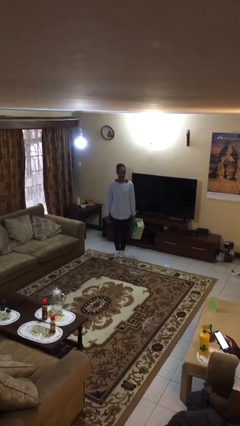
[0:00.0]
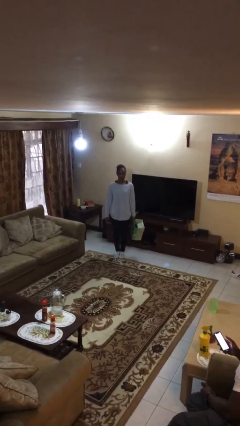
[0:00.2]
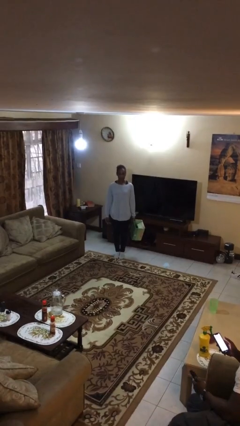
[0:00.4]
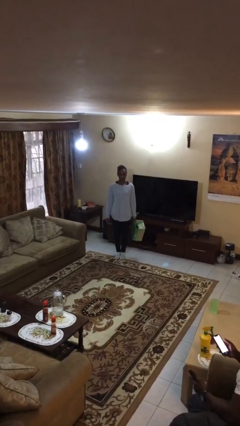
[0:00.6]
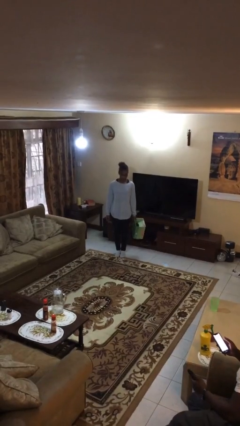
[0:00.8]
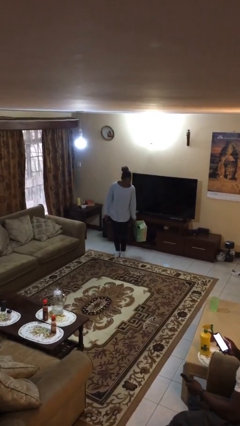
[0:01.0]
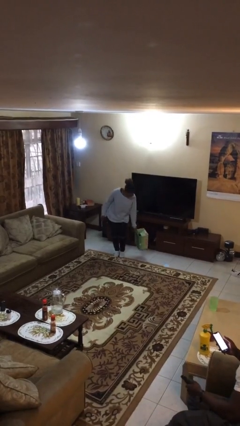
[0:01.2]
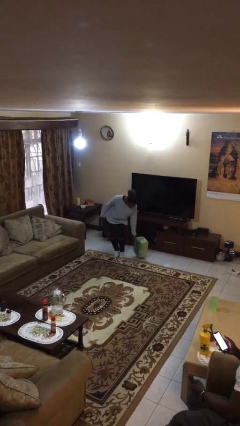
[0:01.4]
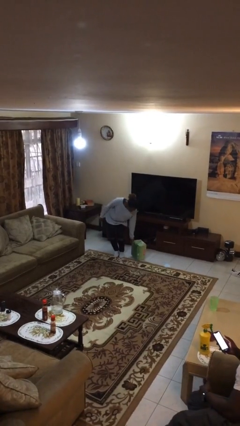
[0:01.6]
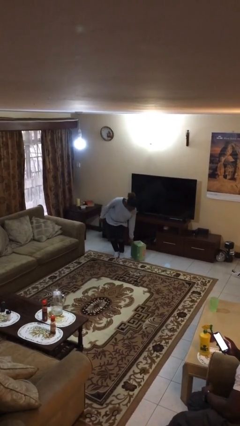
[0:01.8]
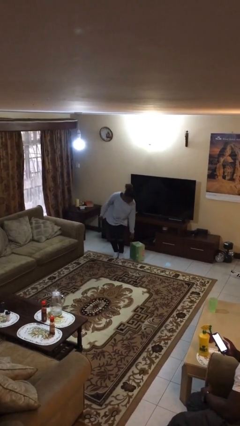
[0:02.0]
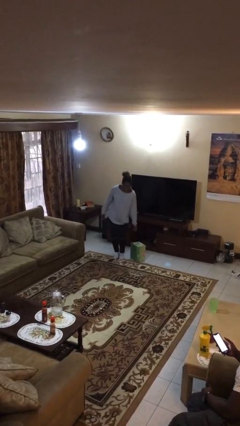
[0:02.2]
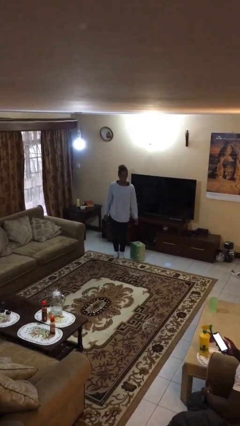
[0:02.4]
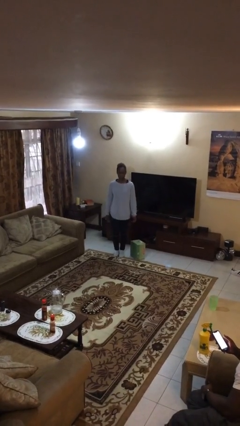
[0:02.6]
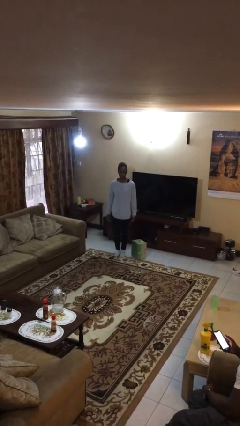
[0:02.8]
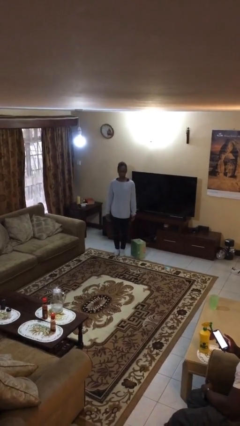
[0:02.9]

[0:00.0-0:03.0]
person puts down object on floor

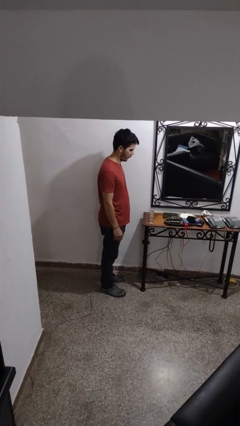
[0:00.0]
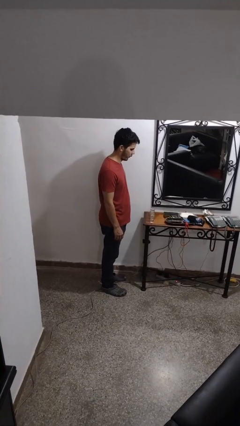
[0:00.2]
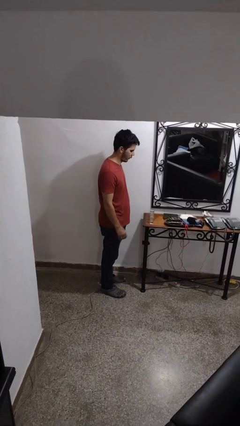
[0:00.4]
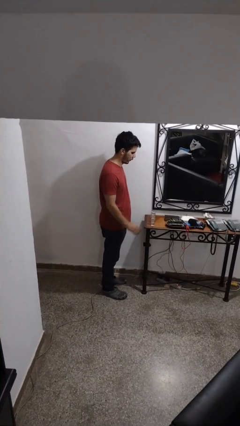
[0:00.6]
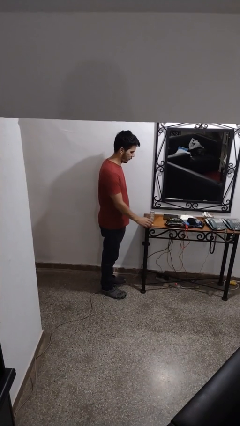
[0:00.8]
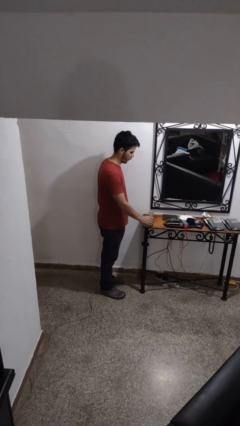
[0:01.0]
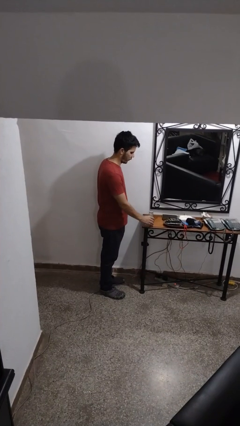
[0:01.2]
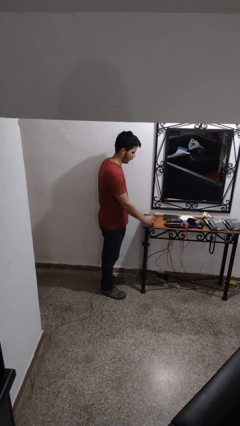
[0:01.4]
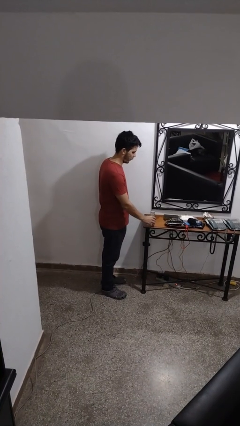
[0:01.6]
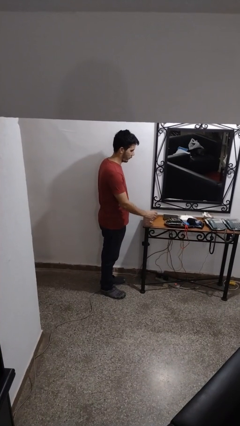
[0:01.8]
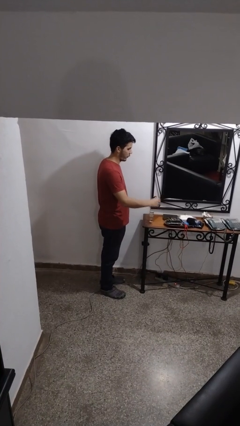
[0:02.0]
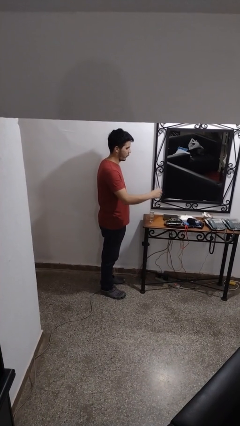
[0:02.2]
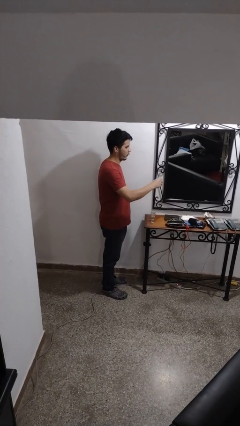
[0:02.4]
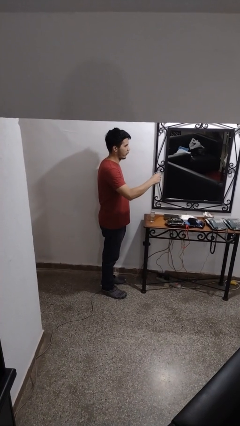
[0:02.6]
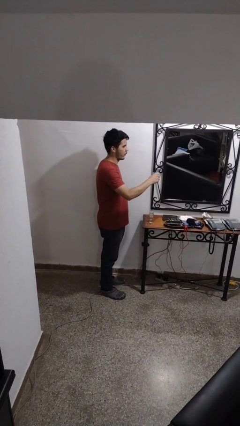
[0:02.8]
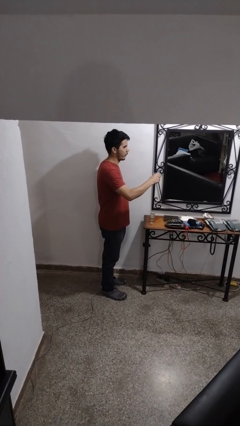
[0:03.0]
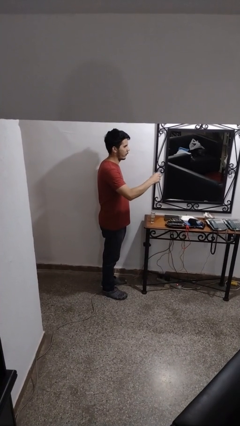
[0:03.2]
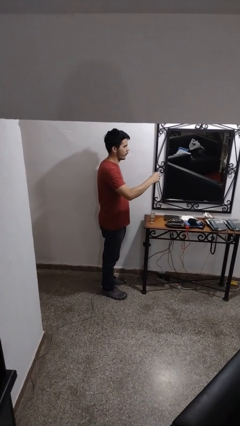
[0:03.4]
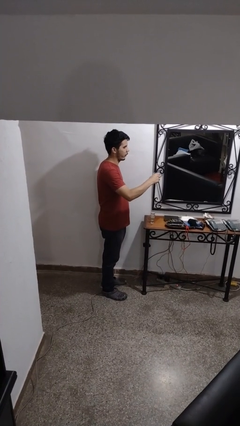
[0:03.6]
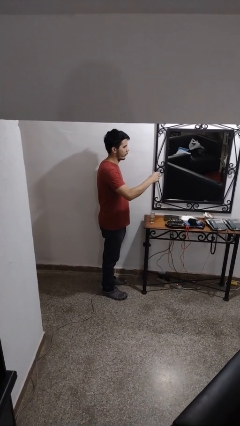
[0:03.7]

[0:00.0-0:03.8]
person picks up object from table

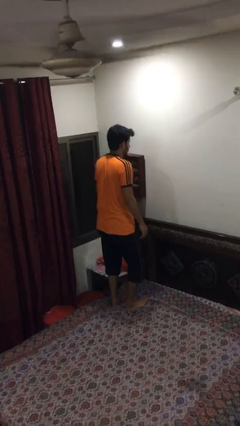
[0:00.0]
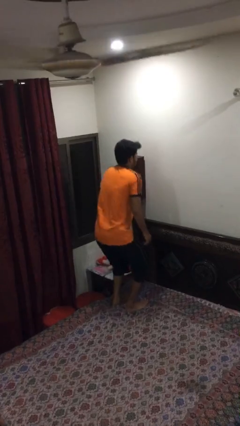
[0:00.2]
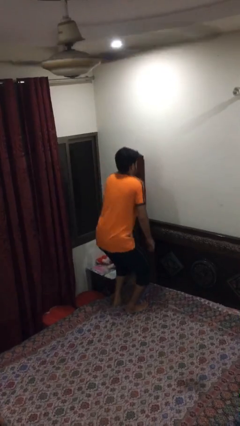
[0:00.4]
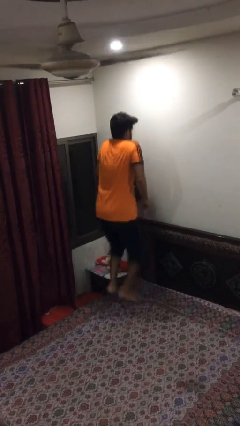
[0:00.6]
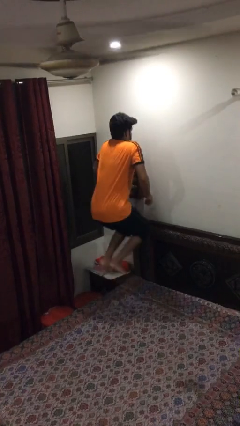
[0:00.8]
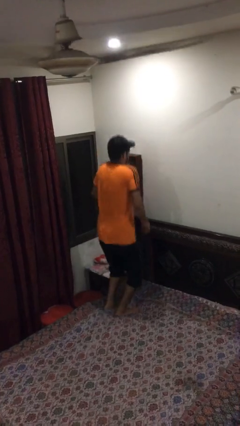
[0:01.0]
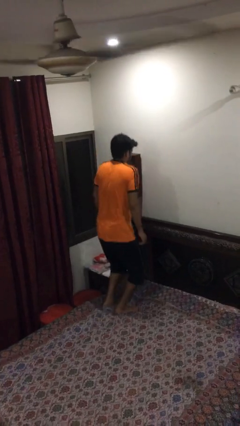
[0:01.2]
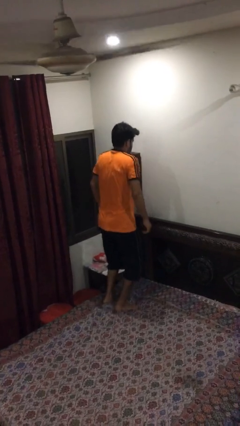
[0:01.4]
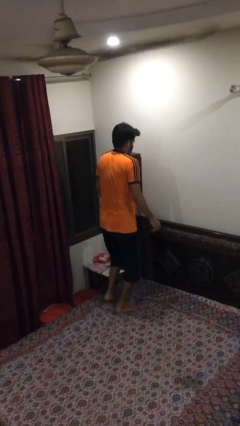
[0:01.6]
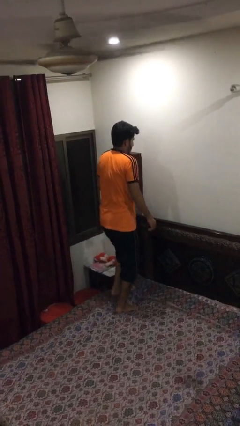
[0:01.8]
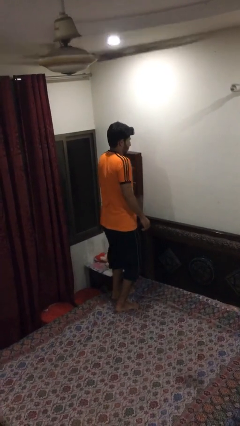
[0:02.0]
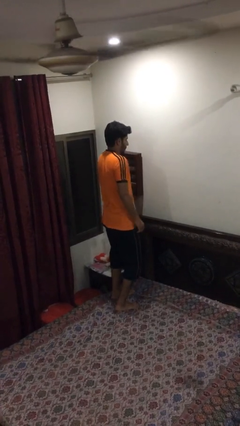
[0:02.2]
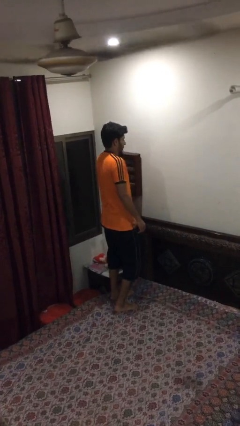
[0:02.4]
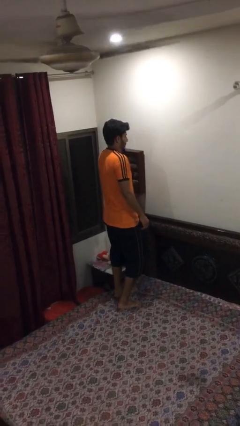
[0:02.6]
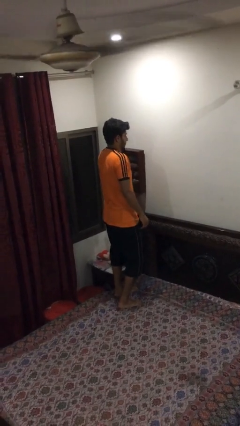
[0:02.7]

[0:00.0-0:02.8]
person jumps on bed

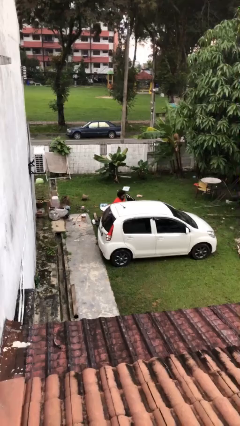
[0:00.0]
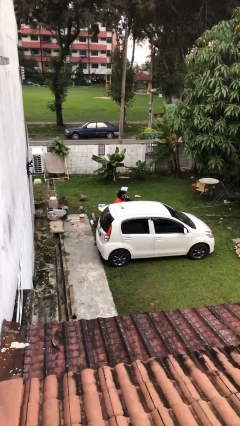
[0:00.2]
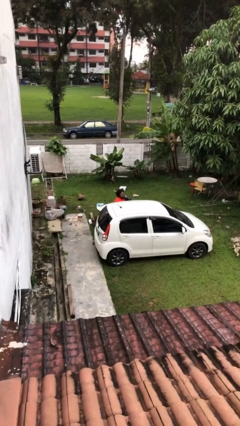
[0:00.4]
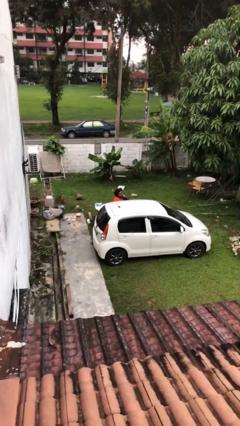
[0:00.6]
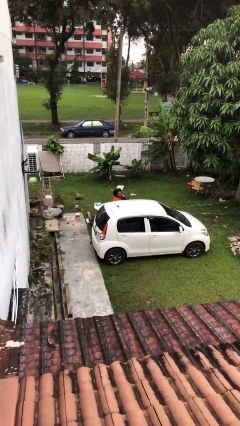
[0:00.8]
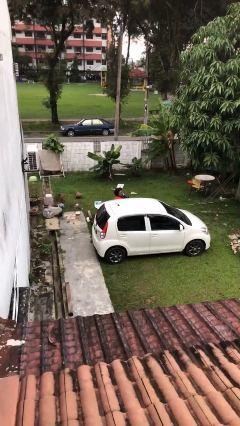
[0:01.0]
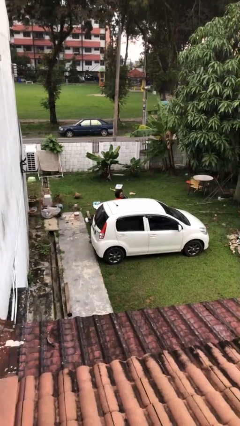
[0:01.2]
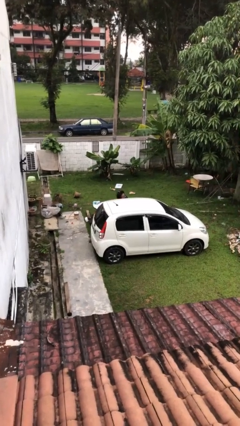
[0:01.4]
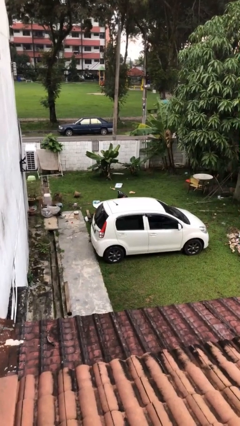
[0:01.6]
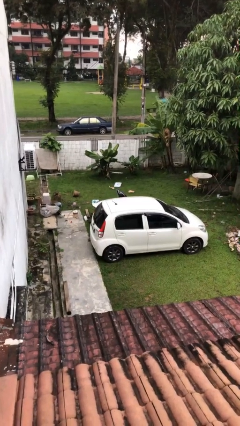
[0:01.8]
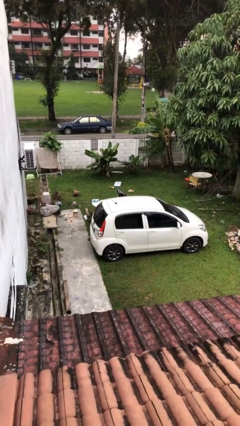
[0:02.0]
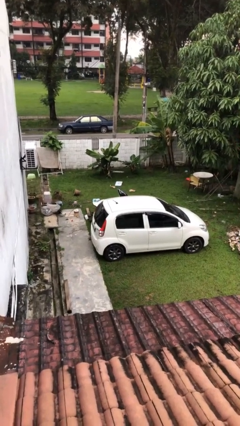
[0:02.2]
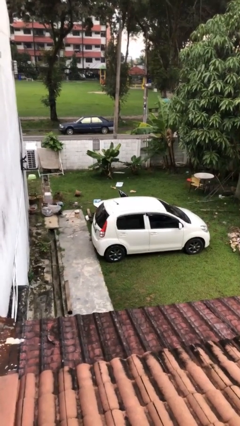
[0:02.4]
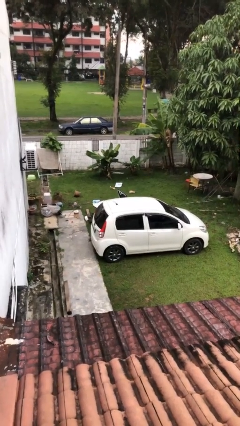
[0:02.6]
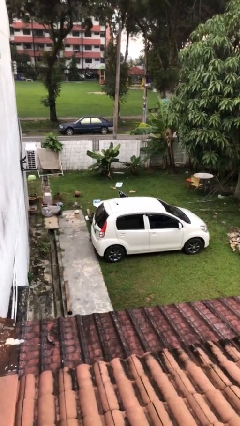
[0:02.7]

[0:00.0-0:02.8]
person enters car

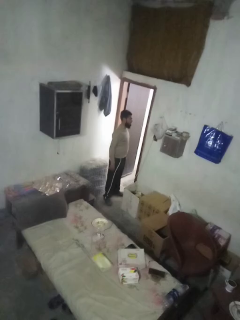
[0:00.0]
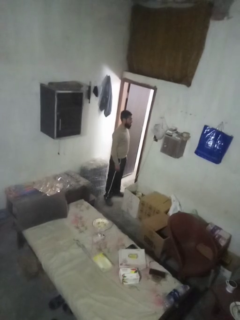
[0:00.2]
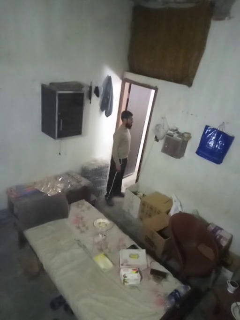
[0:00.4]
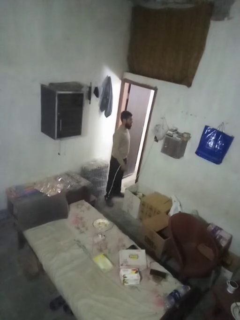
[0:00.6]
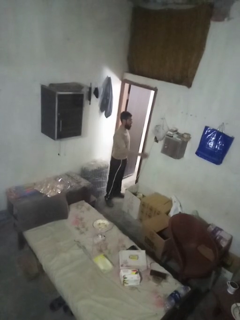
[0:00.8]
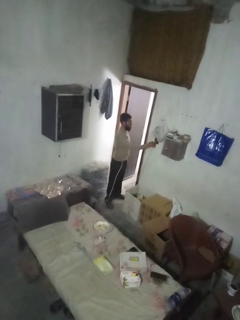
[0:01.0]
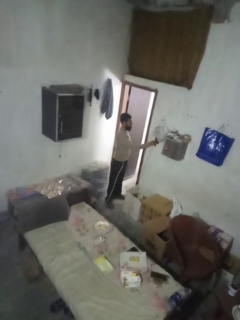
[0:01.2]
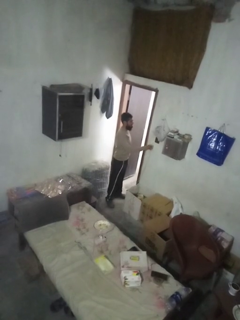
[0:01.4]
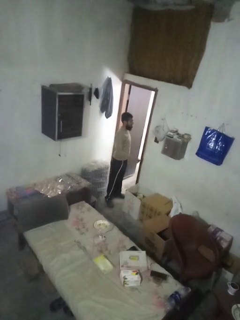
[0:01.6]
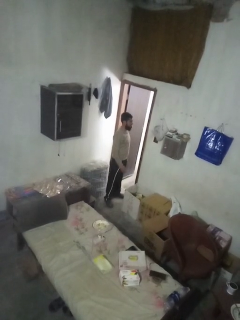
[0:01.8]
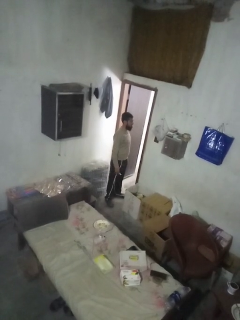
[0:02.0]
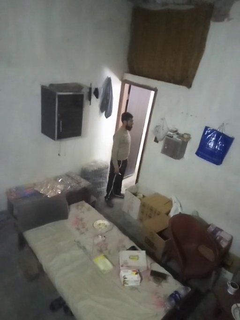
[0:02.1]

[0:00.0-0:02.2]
person unplugs from electrical socket

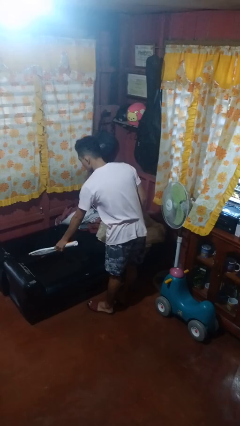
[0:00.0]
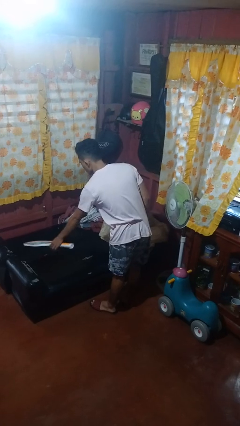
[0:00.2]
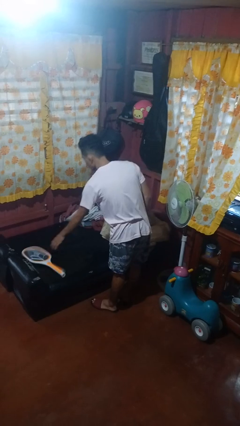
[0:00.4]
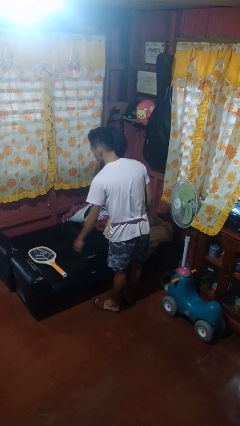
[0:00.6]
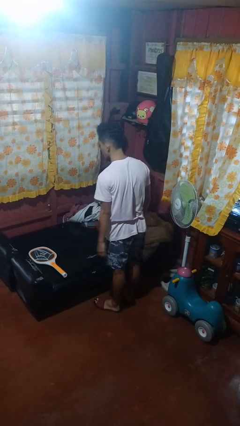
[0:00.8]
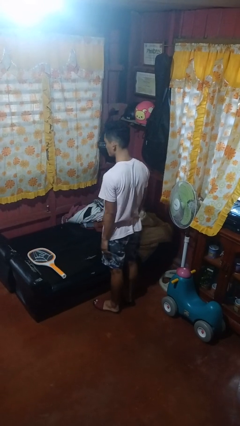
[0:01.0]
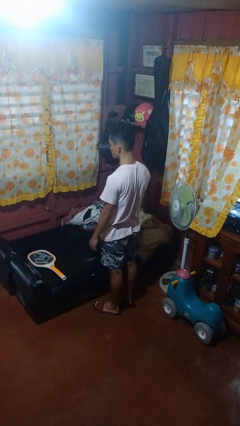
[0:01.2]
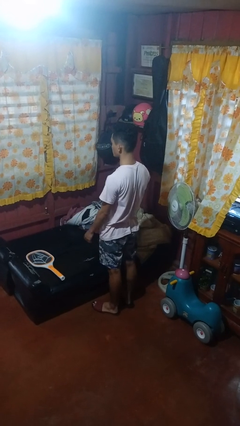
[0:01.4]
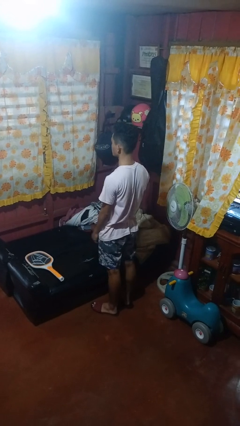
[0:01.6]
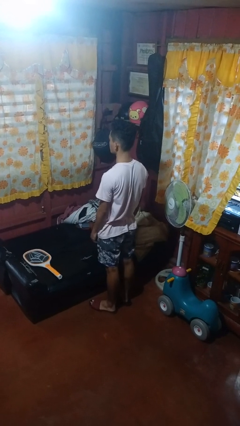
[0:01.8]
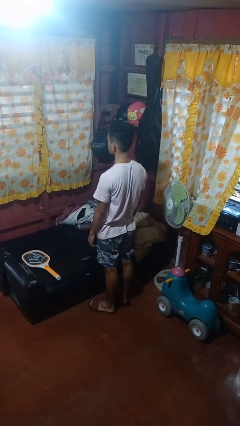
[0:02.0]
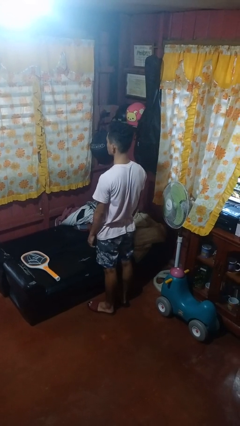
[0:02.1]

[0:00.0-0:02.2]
person puts down object on couch

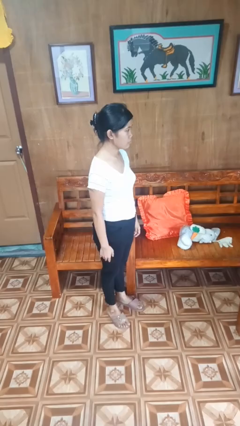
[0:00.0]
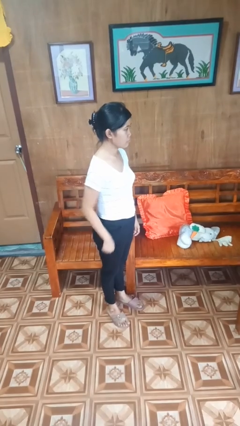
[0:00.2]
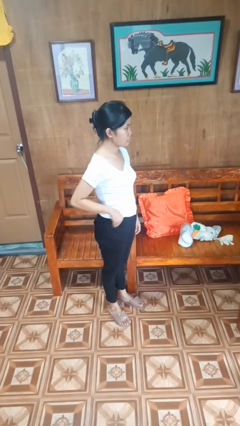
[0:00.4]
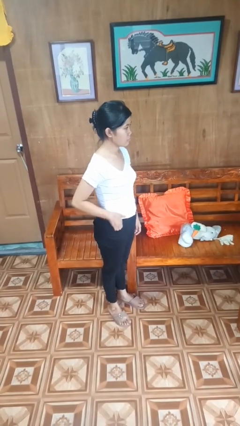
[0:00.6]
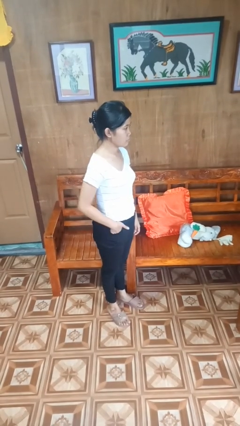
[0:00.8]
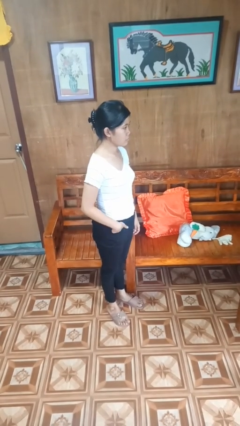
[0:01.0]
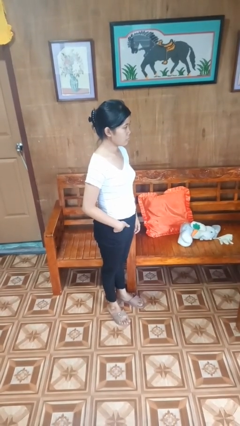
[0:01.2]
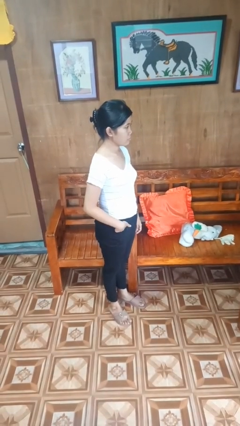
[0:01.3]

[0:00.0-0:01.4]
person puts hands in back pockets
